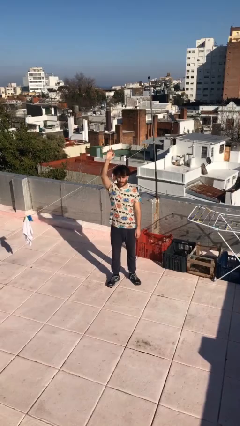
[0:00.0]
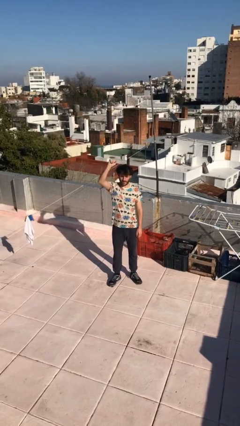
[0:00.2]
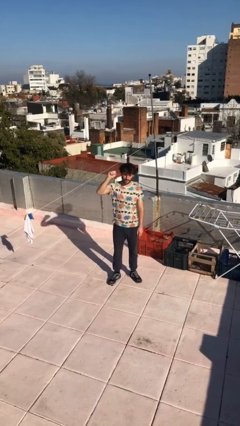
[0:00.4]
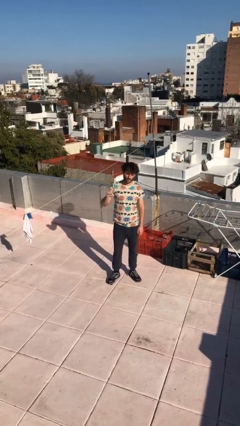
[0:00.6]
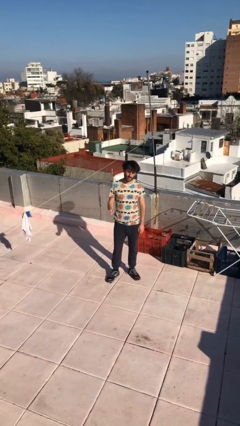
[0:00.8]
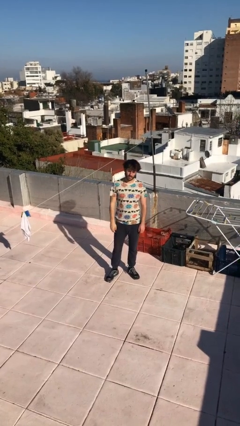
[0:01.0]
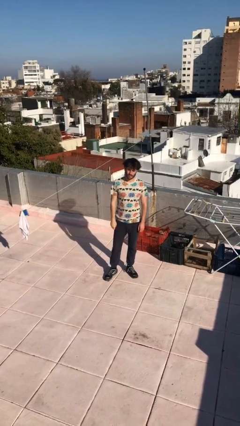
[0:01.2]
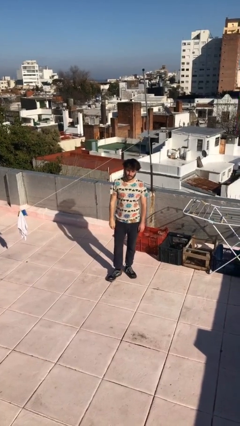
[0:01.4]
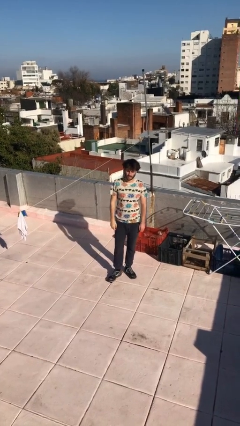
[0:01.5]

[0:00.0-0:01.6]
person gestures lower hand

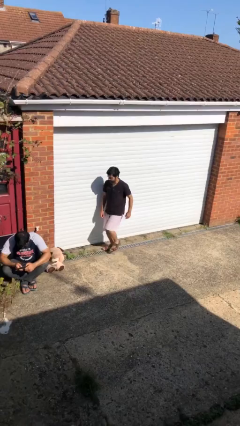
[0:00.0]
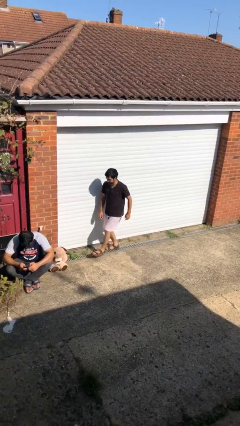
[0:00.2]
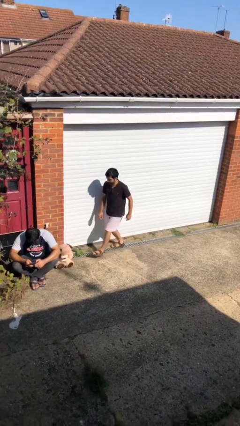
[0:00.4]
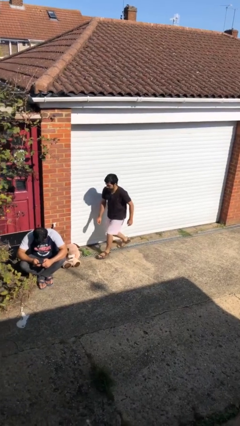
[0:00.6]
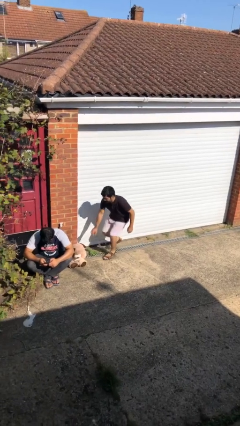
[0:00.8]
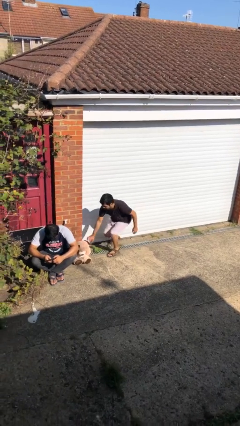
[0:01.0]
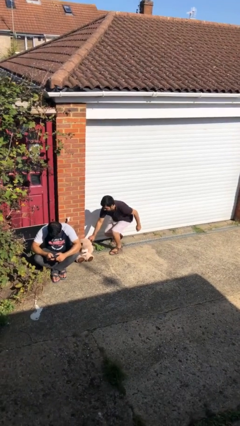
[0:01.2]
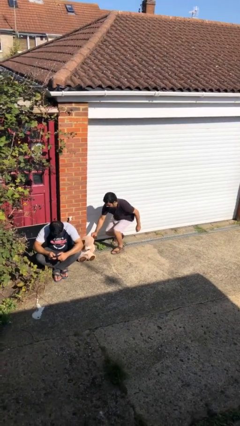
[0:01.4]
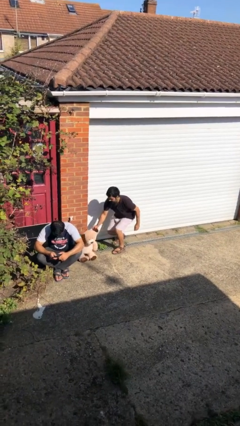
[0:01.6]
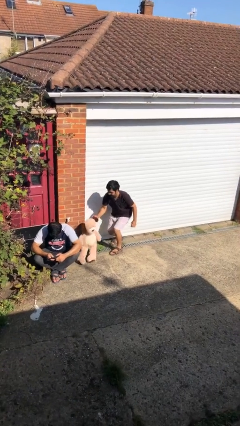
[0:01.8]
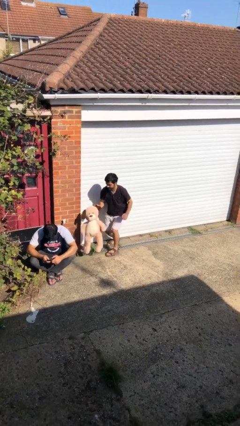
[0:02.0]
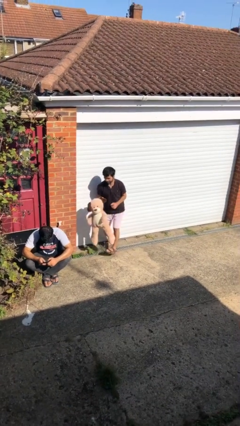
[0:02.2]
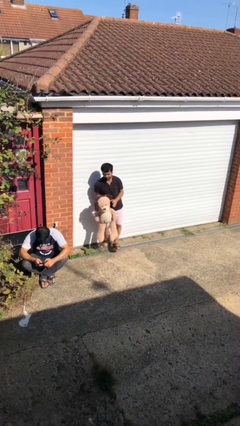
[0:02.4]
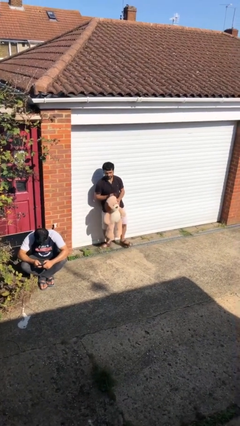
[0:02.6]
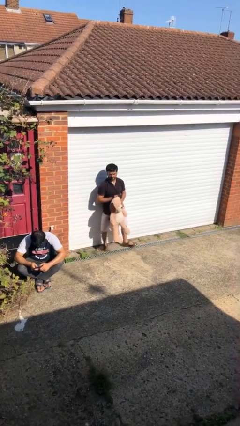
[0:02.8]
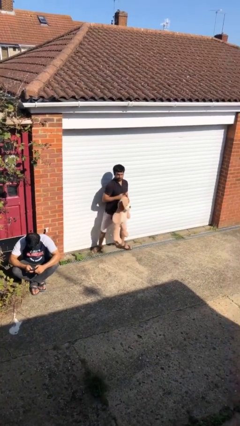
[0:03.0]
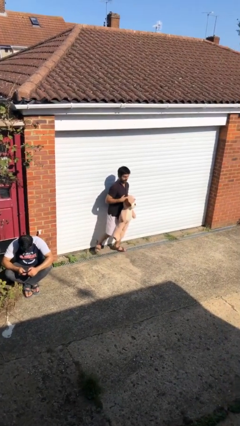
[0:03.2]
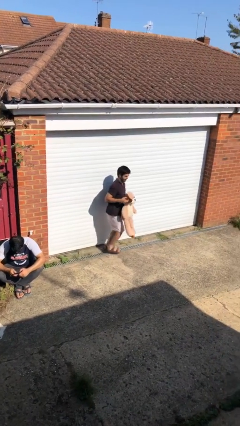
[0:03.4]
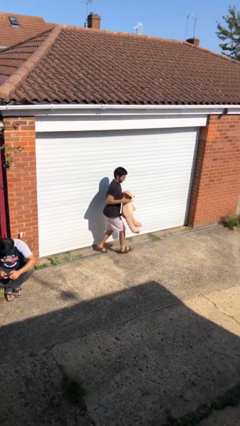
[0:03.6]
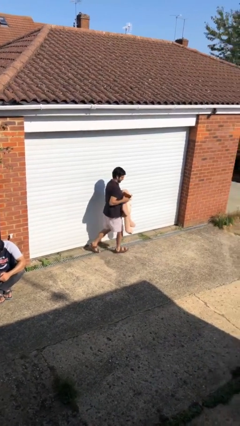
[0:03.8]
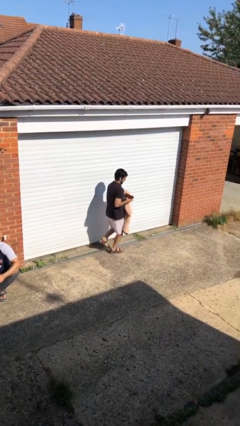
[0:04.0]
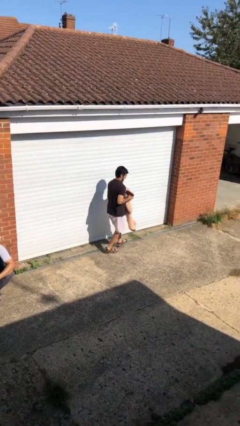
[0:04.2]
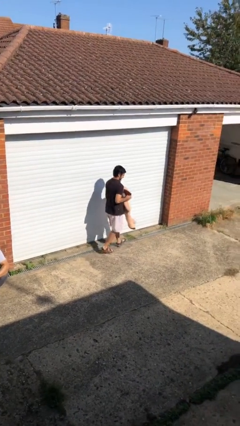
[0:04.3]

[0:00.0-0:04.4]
person steals object from person

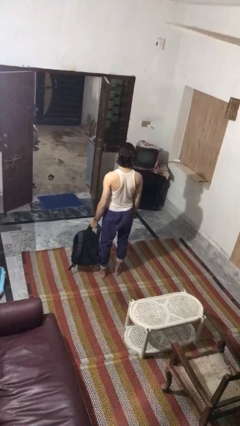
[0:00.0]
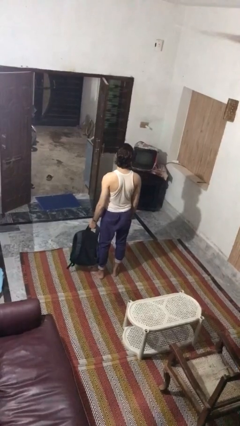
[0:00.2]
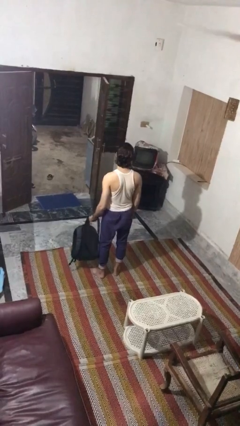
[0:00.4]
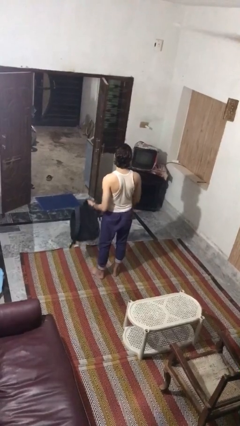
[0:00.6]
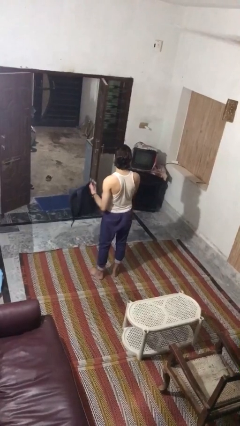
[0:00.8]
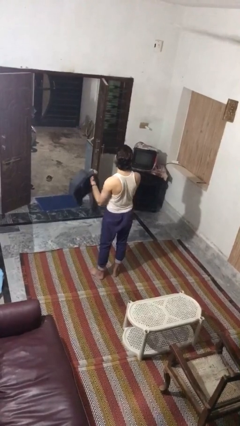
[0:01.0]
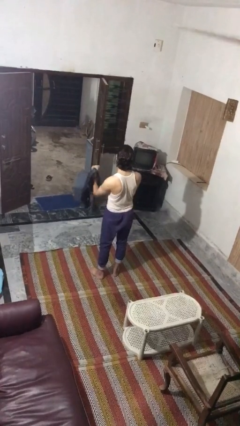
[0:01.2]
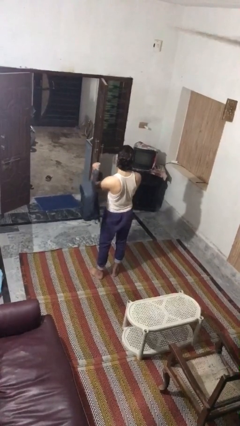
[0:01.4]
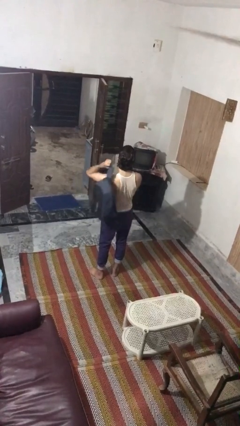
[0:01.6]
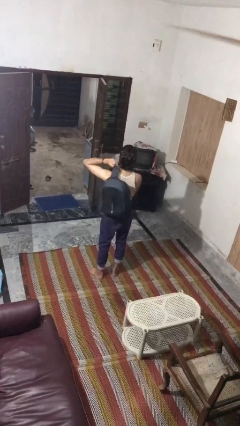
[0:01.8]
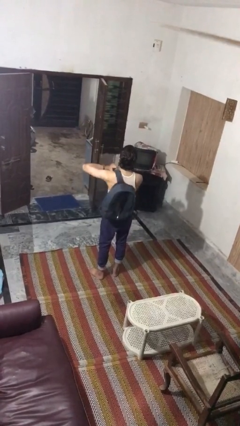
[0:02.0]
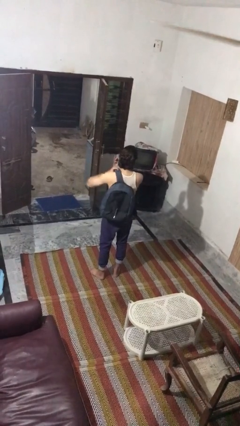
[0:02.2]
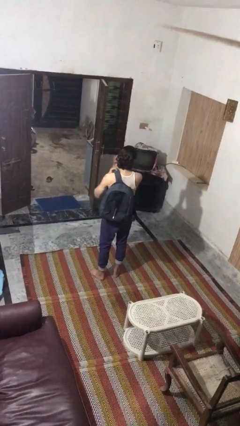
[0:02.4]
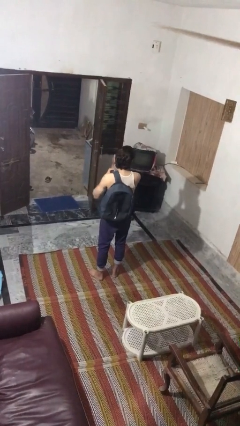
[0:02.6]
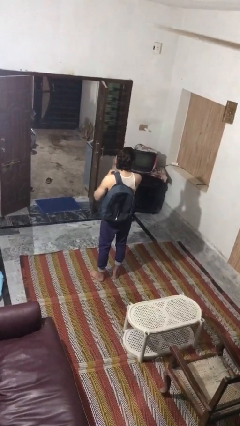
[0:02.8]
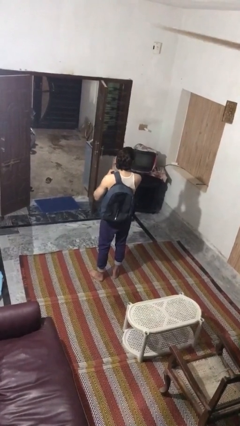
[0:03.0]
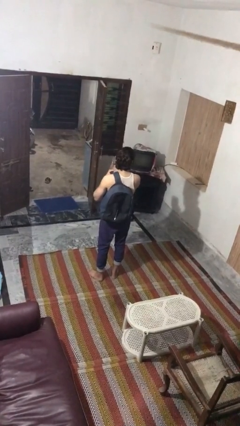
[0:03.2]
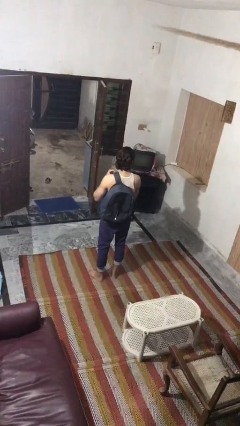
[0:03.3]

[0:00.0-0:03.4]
person puts on backpack

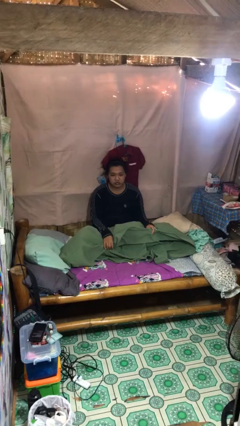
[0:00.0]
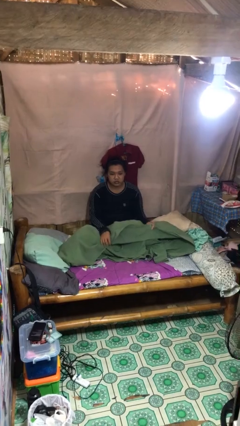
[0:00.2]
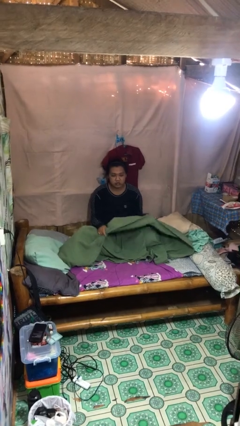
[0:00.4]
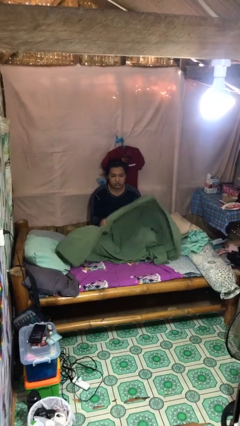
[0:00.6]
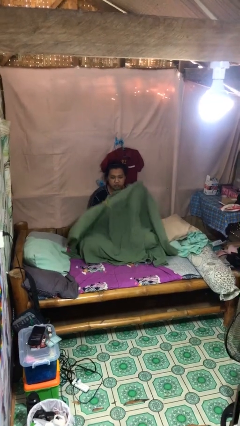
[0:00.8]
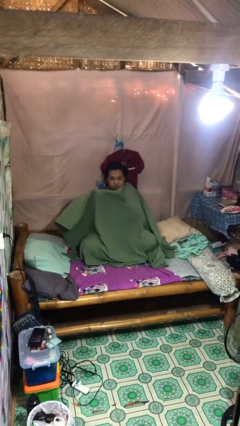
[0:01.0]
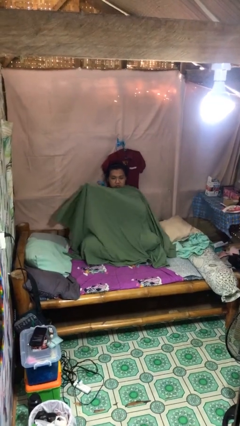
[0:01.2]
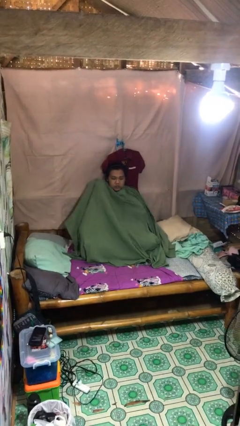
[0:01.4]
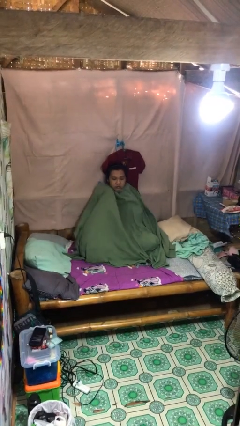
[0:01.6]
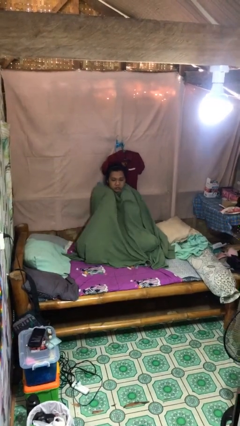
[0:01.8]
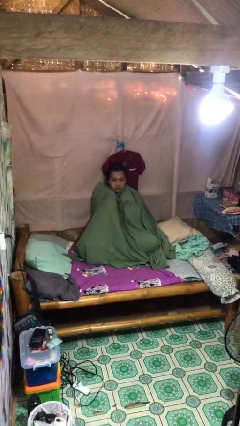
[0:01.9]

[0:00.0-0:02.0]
person covers with blanket

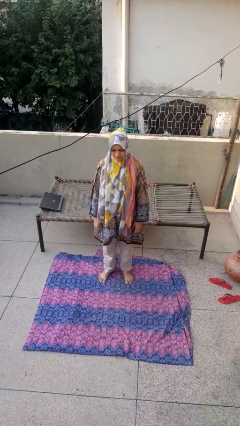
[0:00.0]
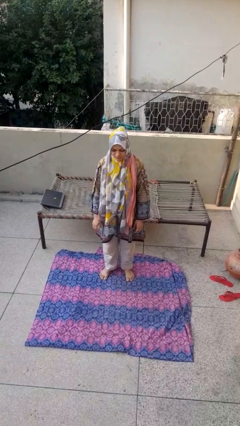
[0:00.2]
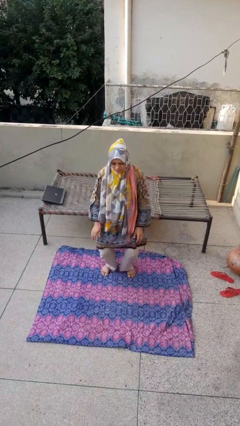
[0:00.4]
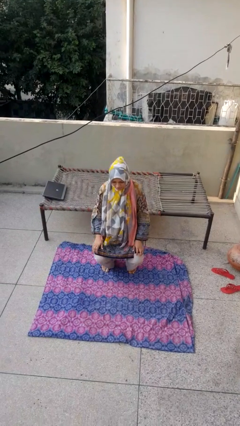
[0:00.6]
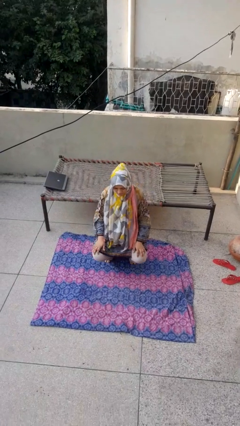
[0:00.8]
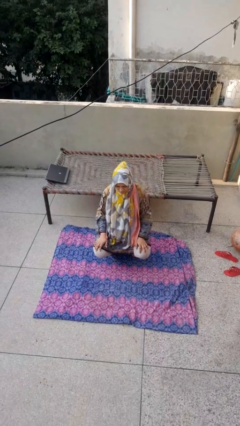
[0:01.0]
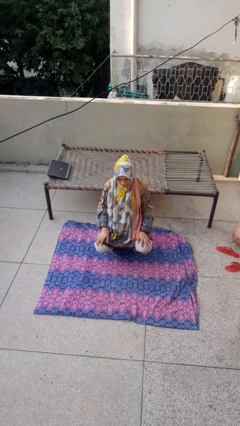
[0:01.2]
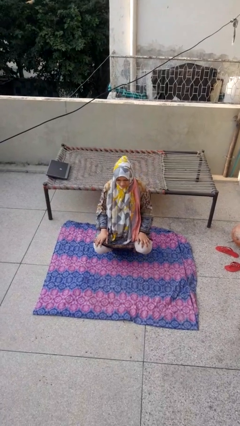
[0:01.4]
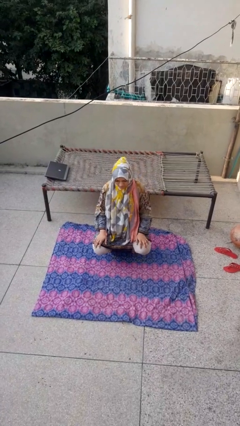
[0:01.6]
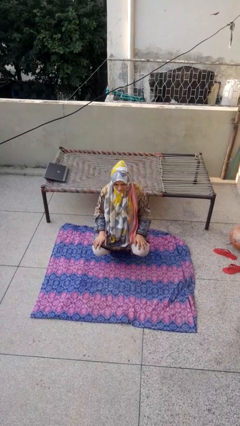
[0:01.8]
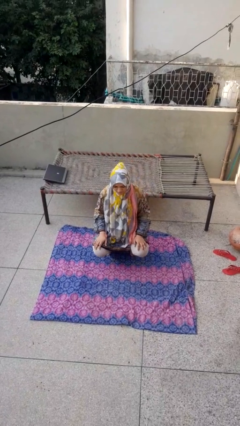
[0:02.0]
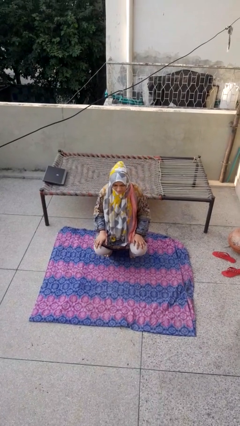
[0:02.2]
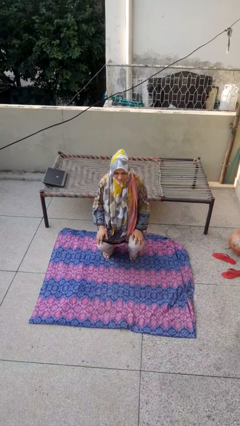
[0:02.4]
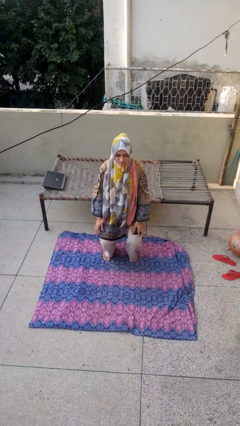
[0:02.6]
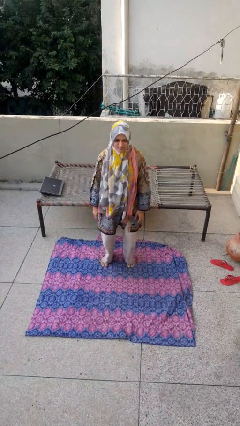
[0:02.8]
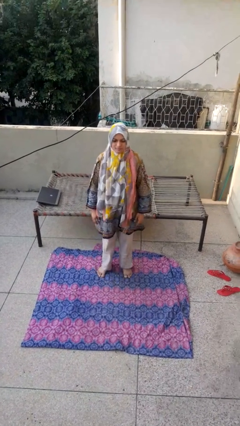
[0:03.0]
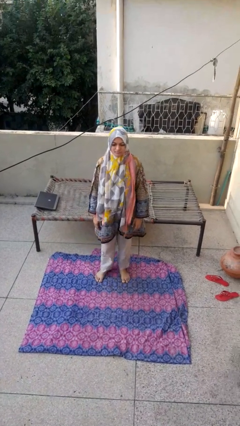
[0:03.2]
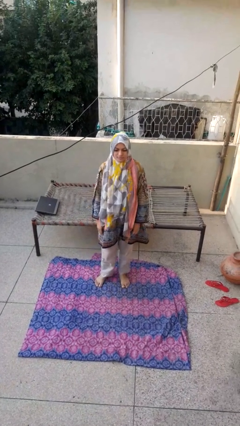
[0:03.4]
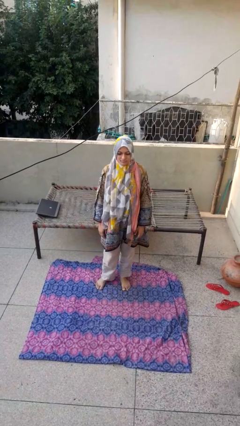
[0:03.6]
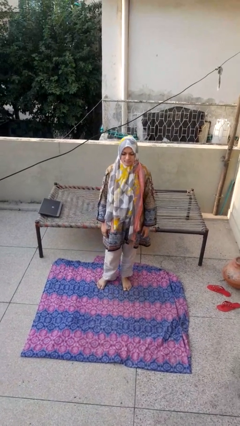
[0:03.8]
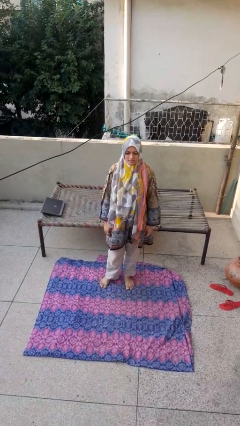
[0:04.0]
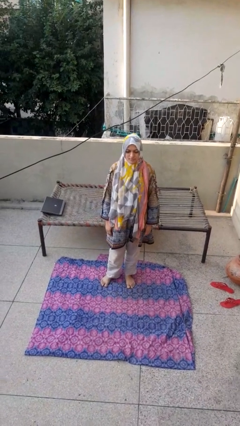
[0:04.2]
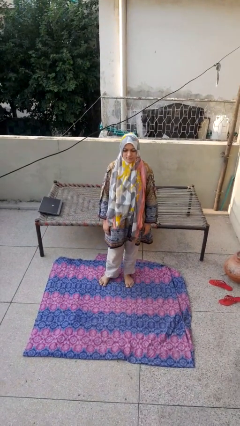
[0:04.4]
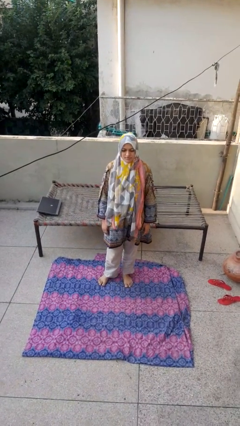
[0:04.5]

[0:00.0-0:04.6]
person squats

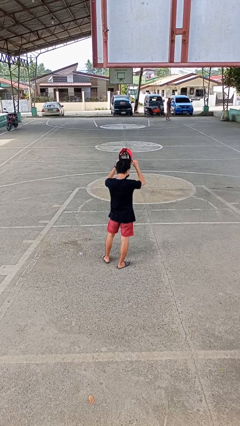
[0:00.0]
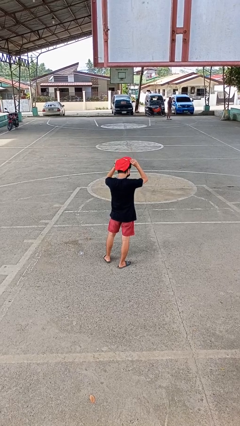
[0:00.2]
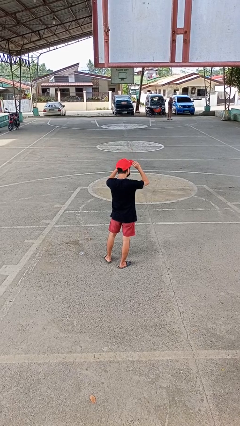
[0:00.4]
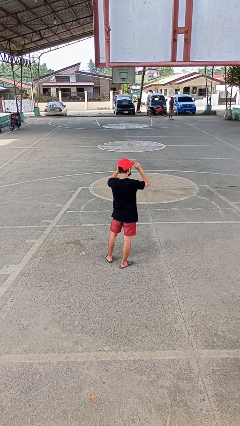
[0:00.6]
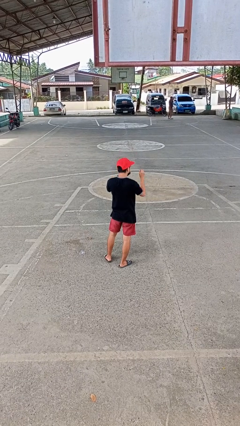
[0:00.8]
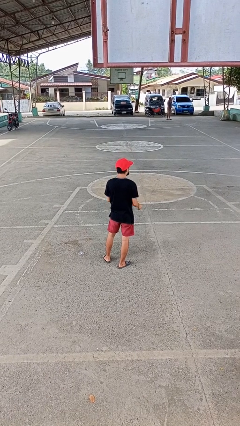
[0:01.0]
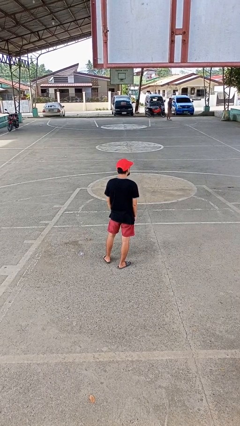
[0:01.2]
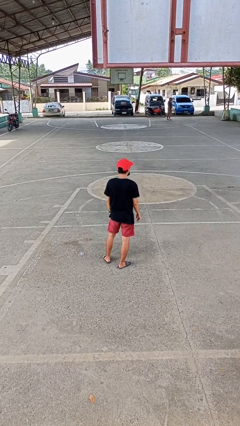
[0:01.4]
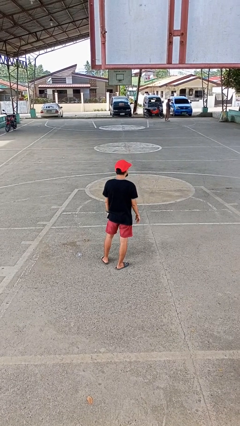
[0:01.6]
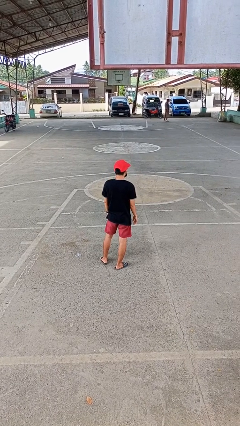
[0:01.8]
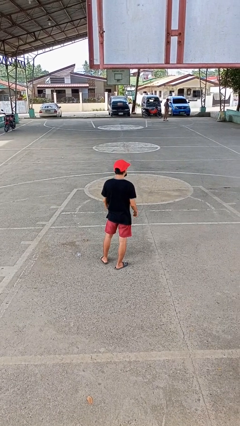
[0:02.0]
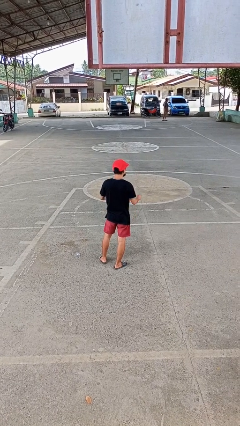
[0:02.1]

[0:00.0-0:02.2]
person puts on hat
